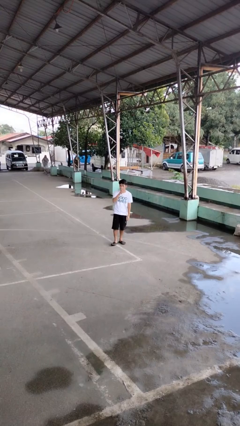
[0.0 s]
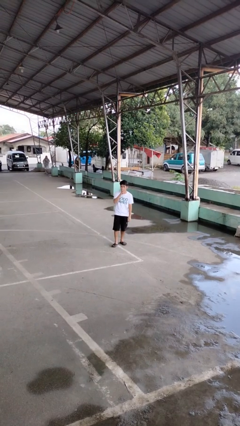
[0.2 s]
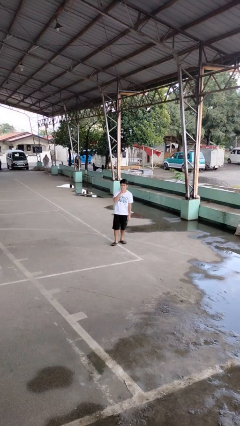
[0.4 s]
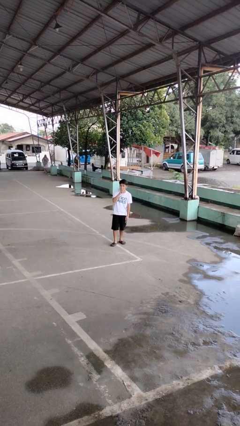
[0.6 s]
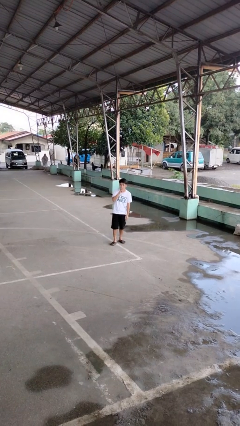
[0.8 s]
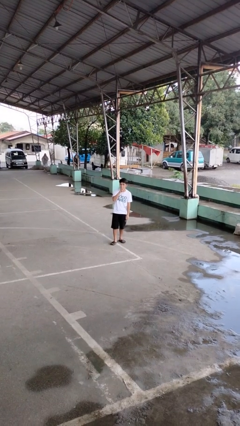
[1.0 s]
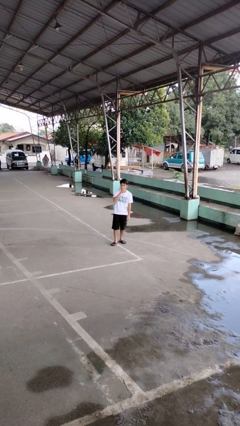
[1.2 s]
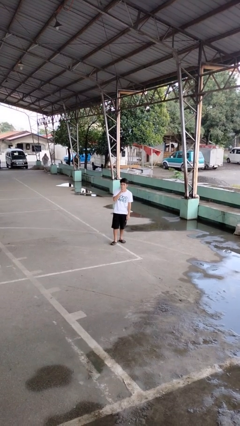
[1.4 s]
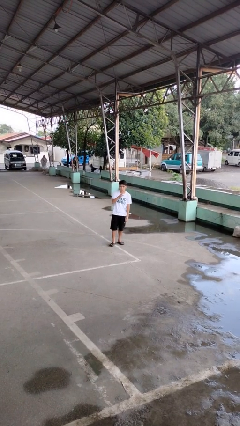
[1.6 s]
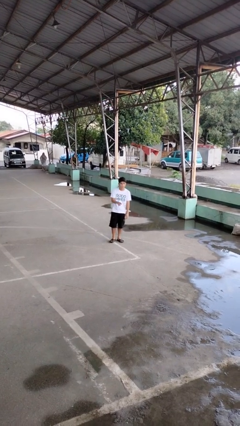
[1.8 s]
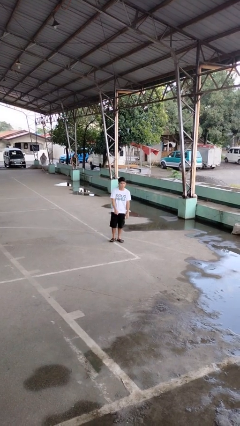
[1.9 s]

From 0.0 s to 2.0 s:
person gestures be quiet

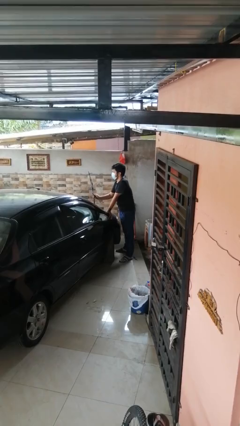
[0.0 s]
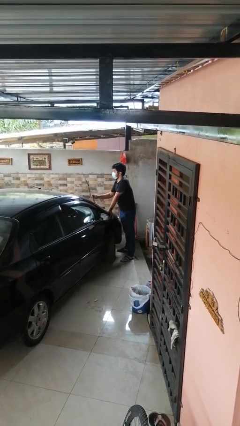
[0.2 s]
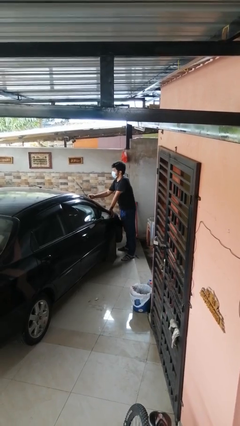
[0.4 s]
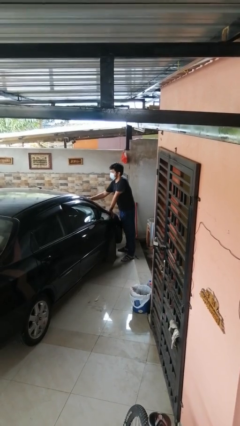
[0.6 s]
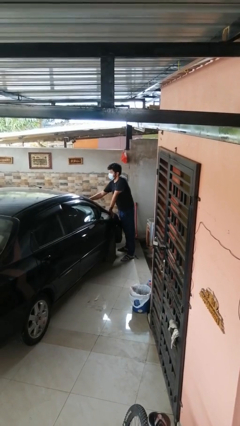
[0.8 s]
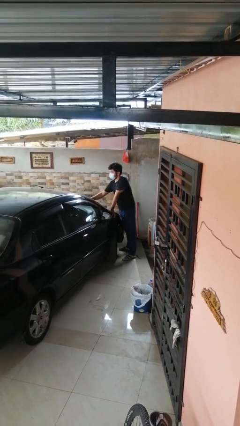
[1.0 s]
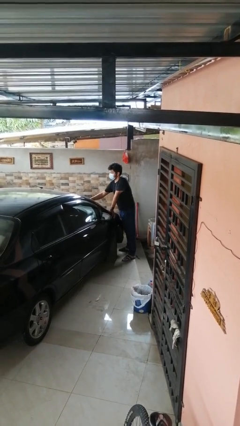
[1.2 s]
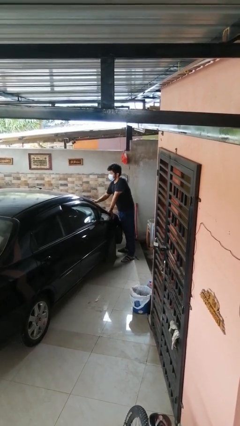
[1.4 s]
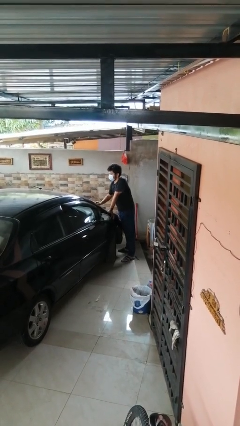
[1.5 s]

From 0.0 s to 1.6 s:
person flips down car wipers

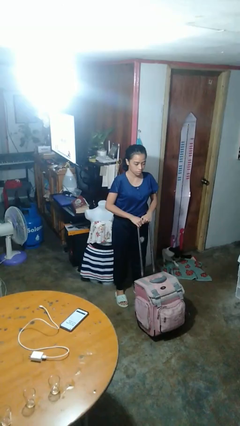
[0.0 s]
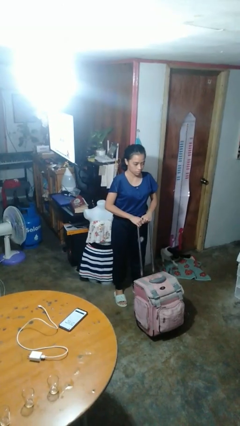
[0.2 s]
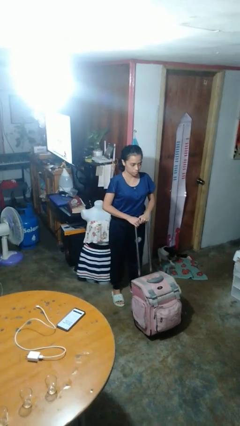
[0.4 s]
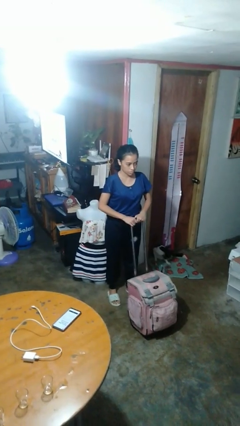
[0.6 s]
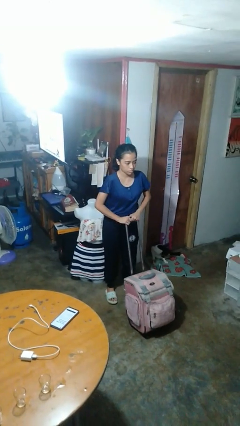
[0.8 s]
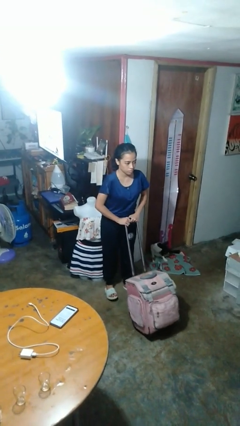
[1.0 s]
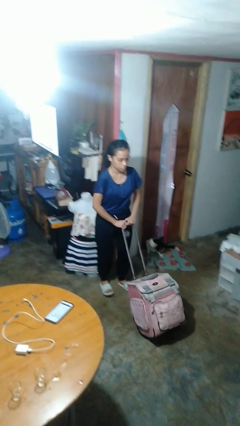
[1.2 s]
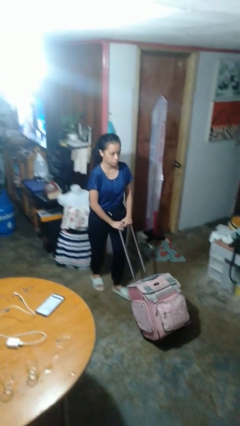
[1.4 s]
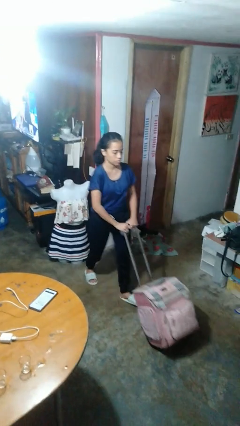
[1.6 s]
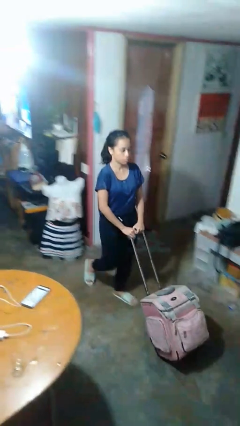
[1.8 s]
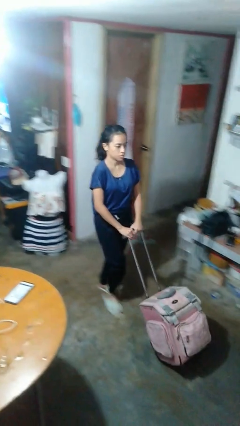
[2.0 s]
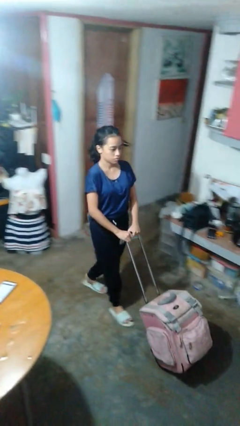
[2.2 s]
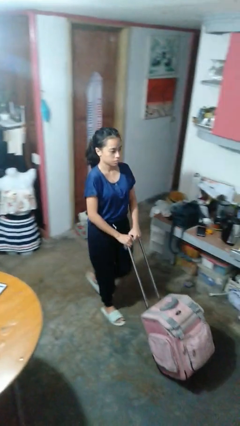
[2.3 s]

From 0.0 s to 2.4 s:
person pushes wheeled cart

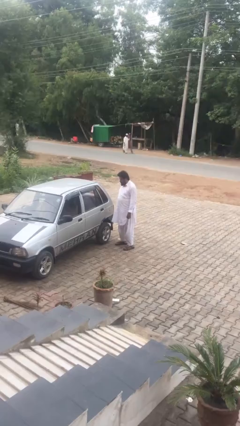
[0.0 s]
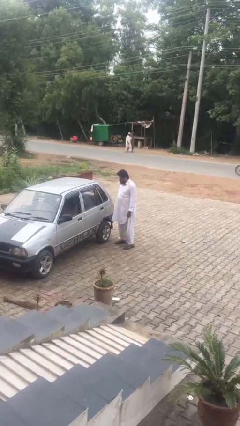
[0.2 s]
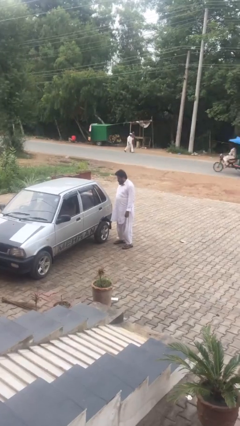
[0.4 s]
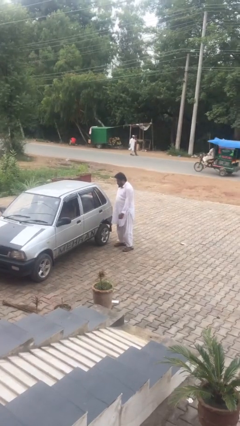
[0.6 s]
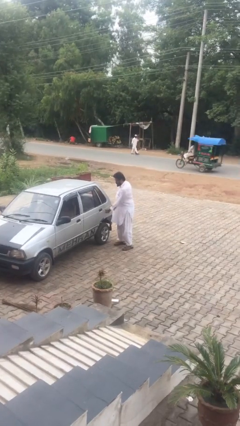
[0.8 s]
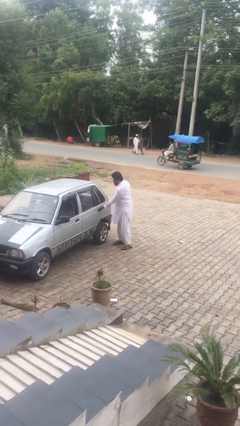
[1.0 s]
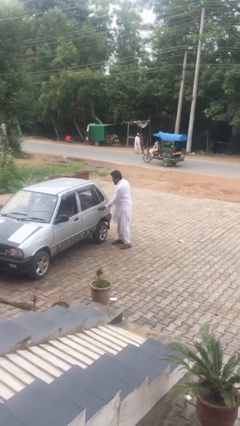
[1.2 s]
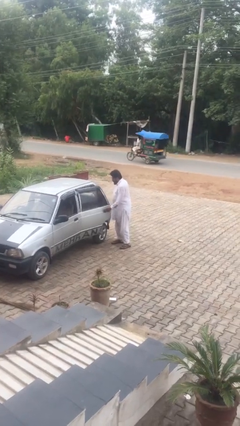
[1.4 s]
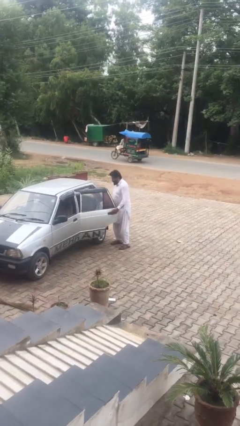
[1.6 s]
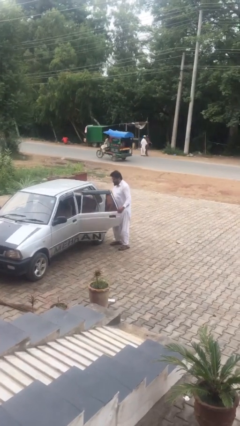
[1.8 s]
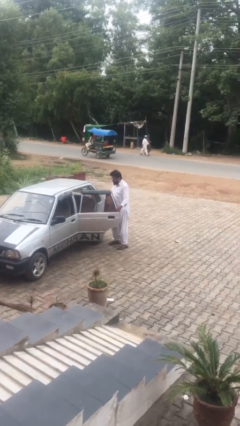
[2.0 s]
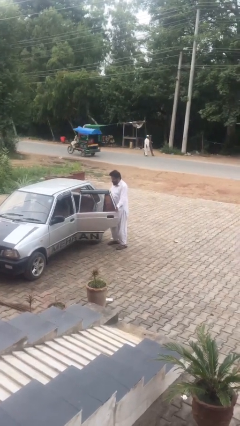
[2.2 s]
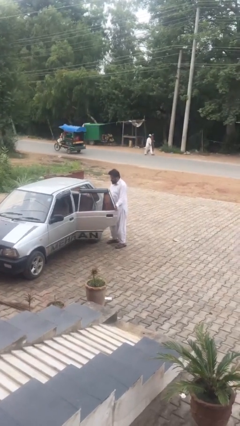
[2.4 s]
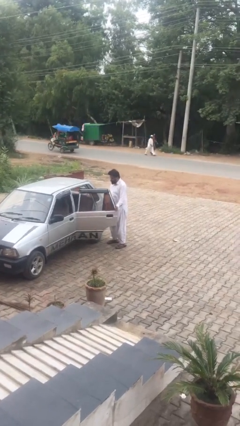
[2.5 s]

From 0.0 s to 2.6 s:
person opens car door

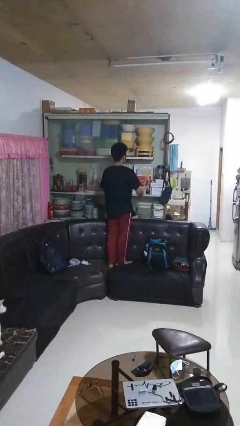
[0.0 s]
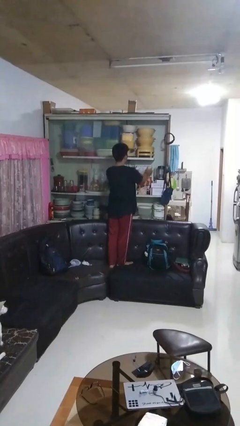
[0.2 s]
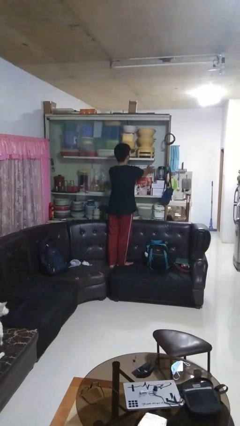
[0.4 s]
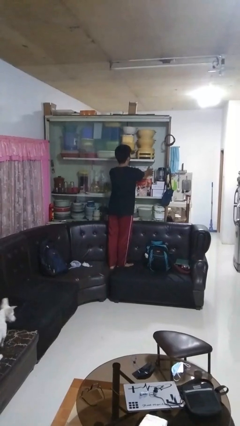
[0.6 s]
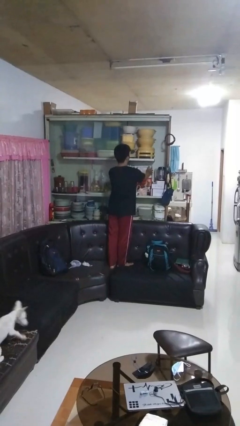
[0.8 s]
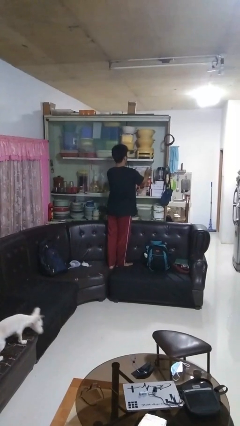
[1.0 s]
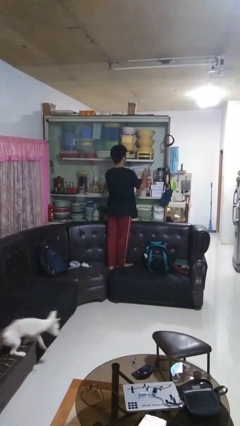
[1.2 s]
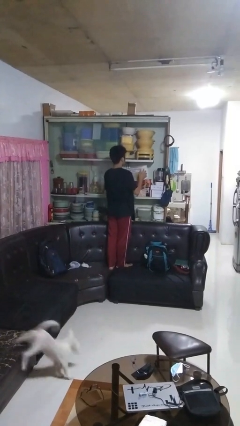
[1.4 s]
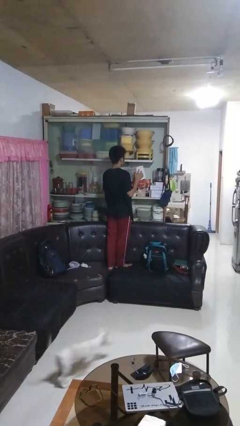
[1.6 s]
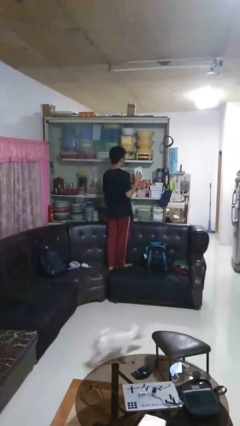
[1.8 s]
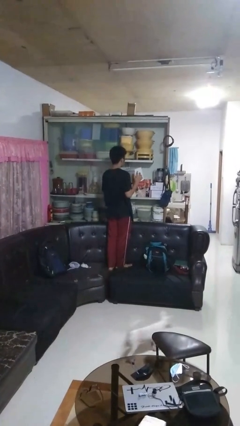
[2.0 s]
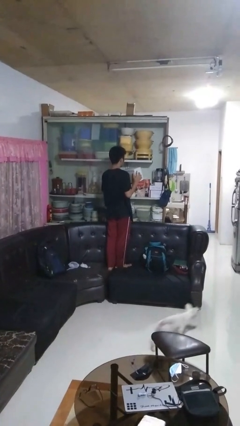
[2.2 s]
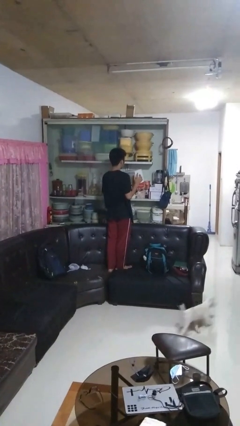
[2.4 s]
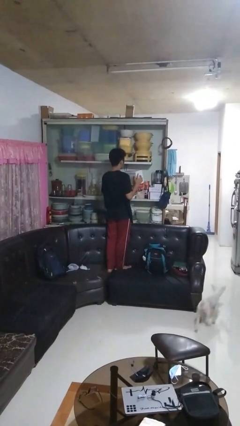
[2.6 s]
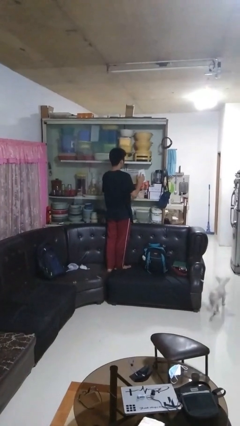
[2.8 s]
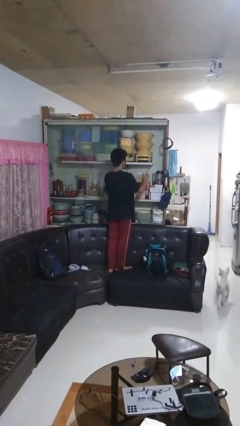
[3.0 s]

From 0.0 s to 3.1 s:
person picks up object from cabinet

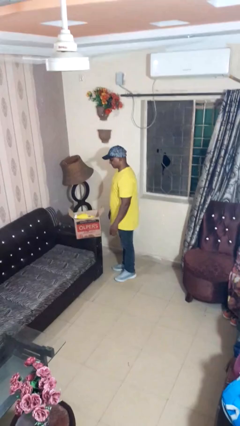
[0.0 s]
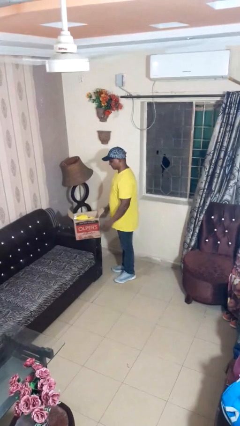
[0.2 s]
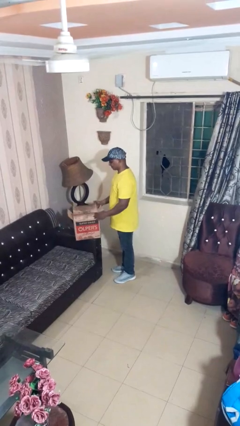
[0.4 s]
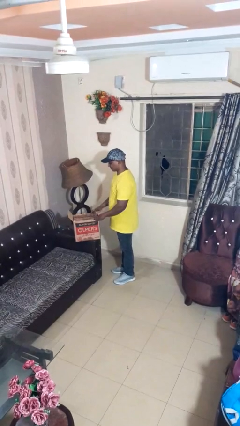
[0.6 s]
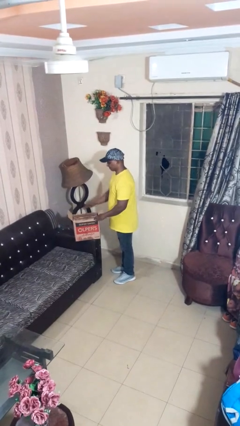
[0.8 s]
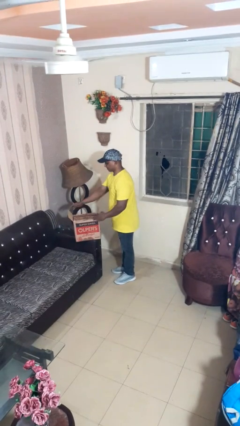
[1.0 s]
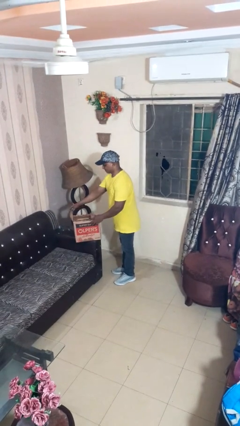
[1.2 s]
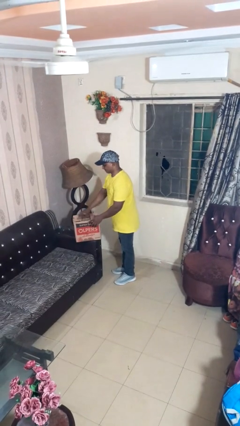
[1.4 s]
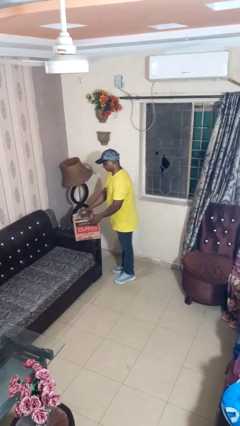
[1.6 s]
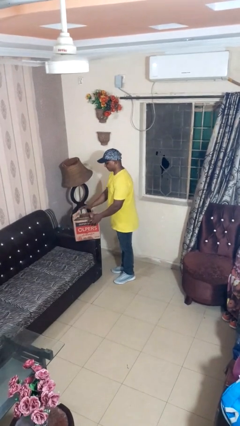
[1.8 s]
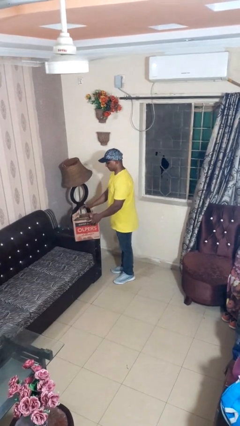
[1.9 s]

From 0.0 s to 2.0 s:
person closes box

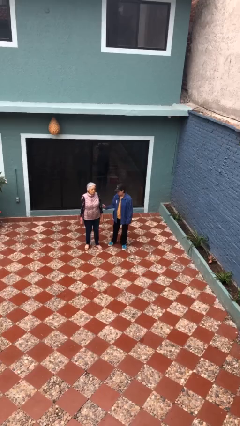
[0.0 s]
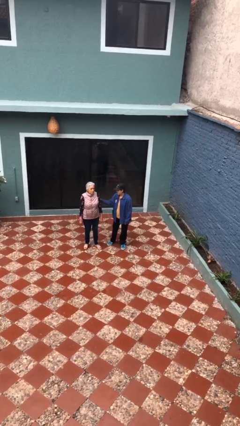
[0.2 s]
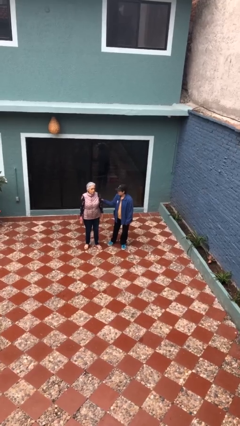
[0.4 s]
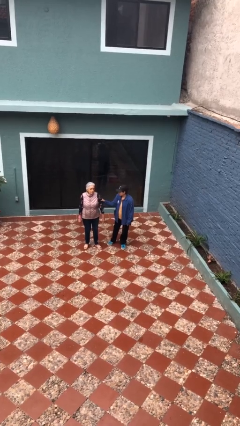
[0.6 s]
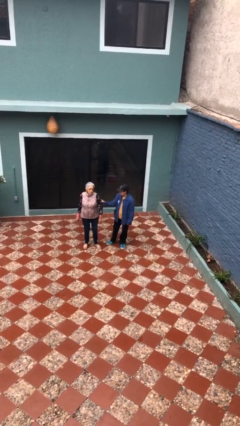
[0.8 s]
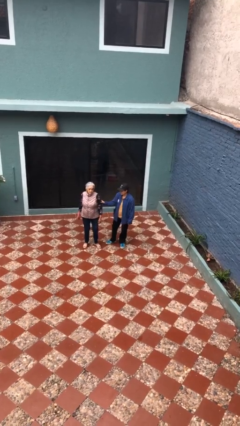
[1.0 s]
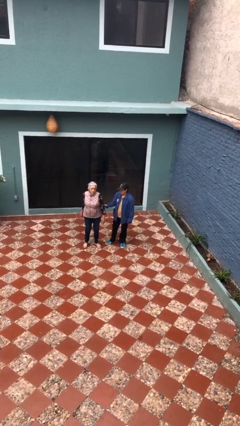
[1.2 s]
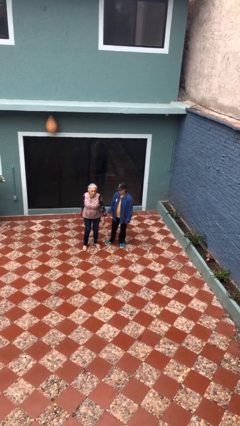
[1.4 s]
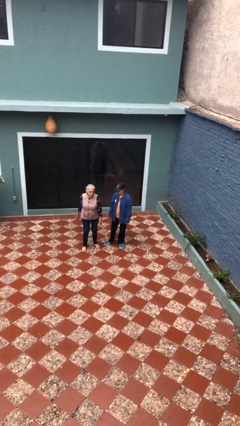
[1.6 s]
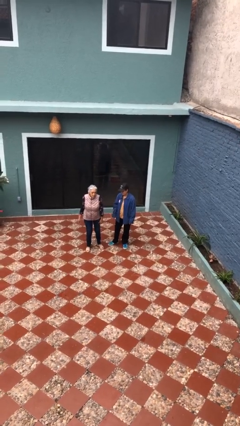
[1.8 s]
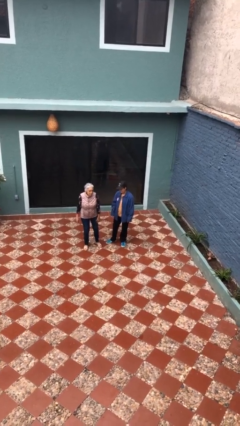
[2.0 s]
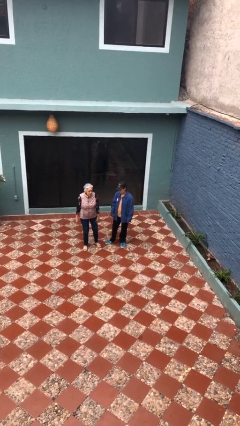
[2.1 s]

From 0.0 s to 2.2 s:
person grabs person by forearm

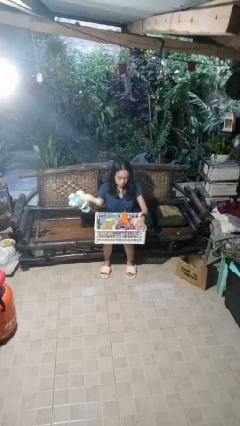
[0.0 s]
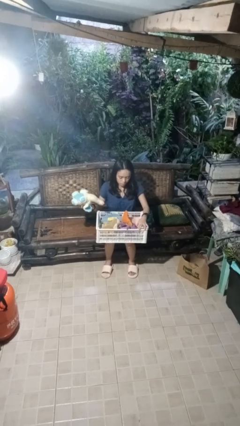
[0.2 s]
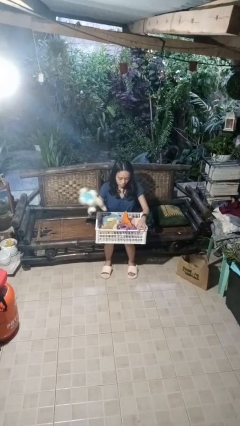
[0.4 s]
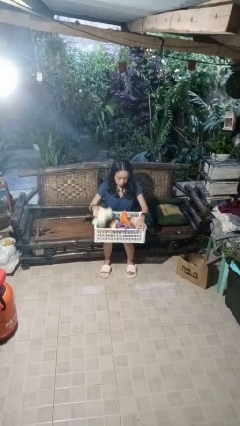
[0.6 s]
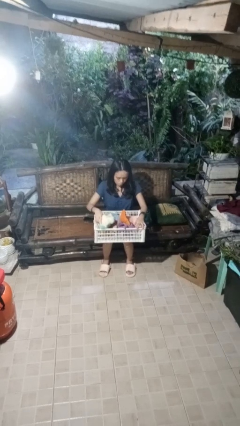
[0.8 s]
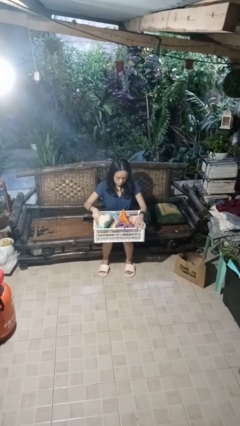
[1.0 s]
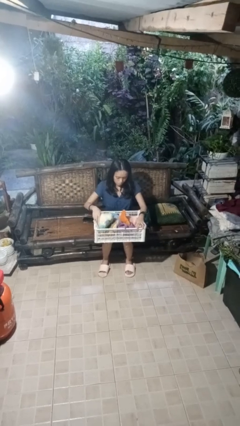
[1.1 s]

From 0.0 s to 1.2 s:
person puts object into basket
